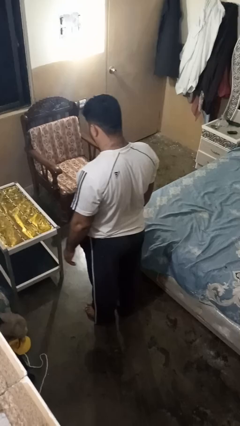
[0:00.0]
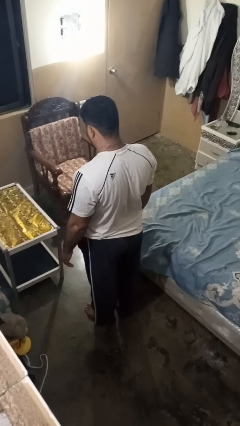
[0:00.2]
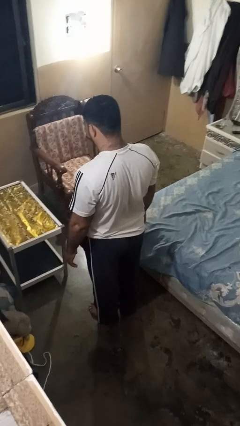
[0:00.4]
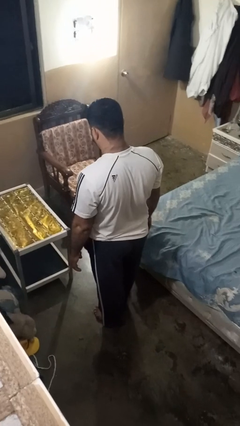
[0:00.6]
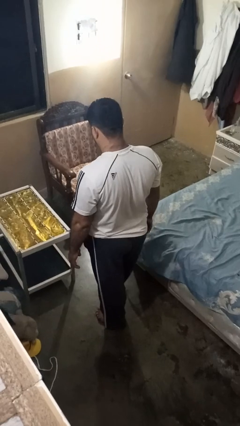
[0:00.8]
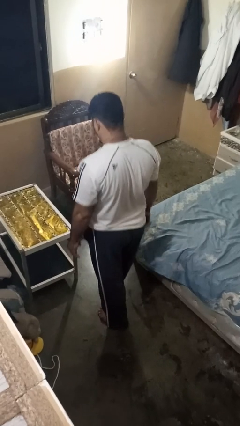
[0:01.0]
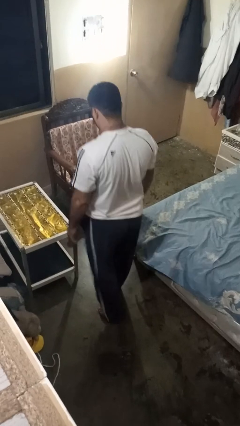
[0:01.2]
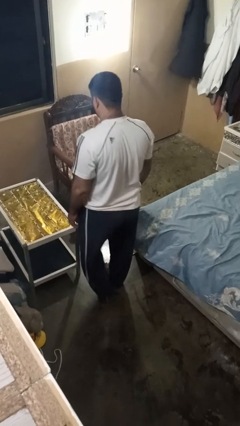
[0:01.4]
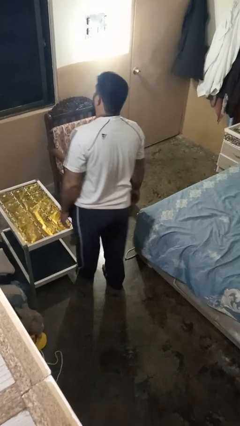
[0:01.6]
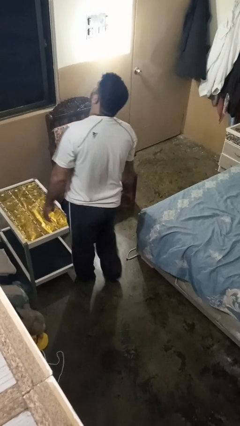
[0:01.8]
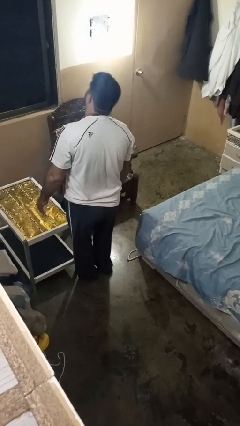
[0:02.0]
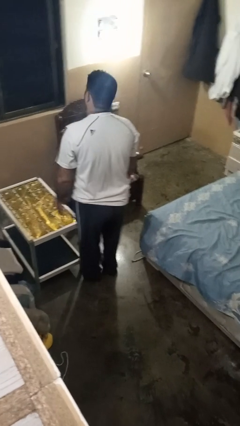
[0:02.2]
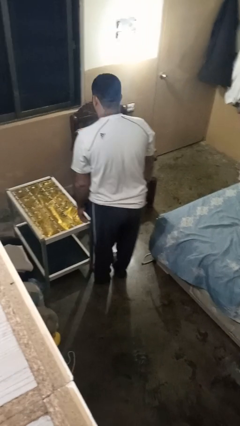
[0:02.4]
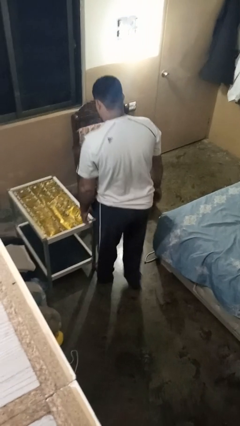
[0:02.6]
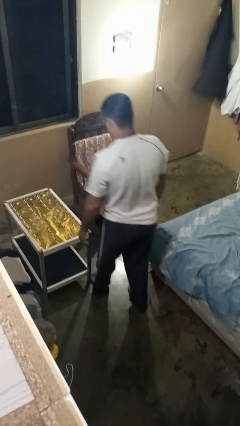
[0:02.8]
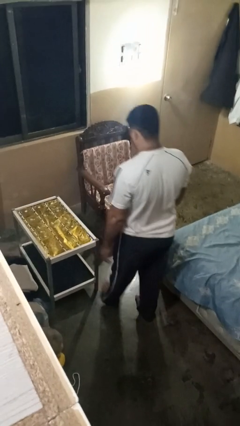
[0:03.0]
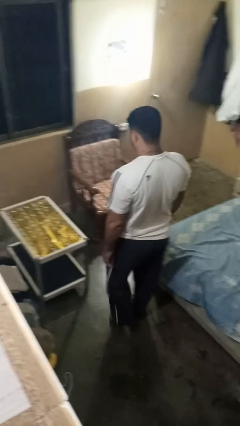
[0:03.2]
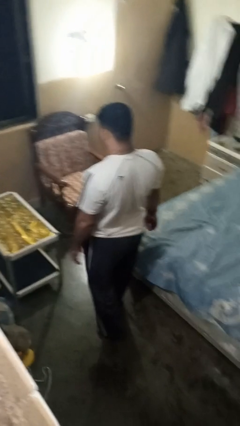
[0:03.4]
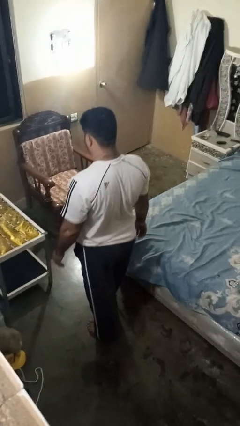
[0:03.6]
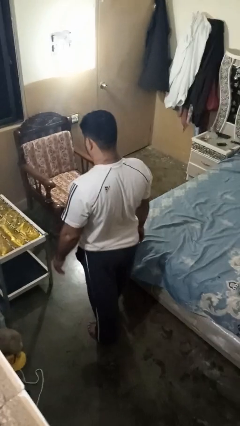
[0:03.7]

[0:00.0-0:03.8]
person bumps into table

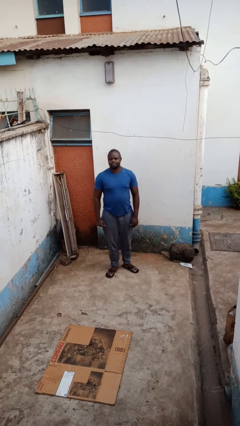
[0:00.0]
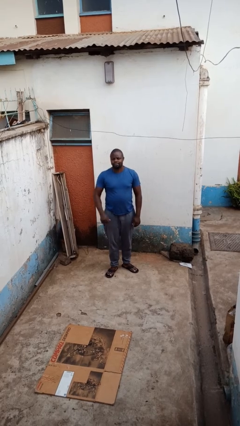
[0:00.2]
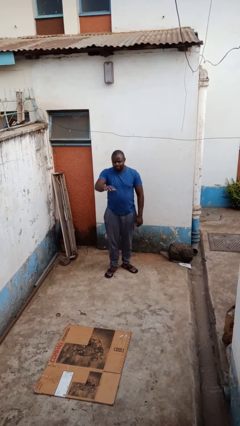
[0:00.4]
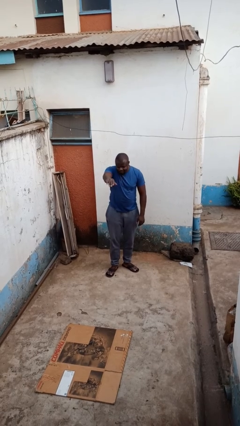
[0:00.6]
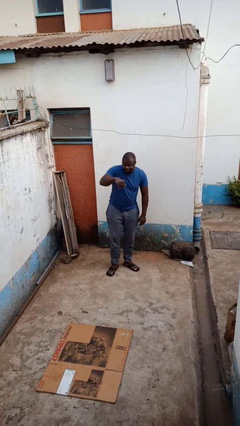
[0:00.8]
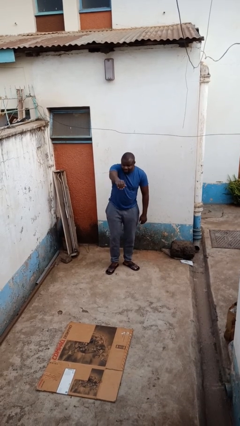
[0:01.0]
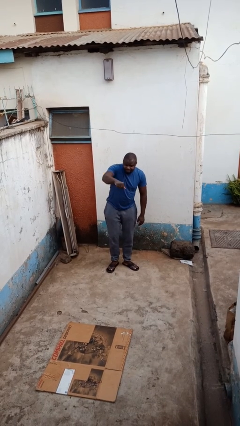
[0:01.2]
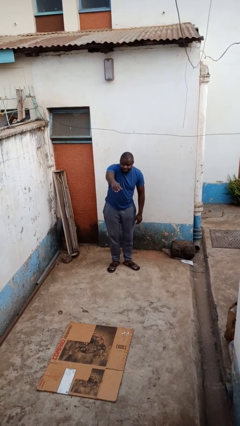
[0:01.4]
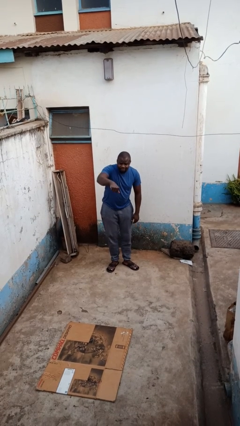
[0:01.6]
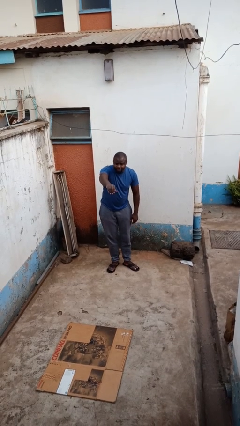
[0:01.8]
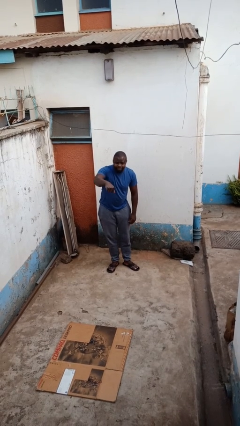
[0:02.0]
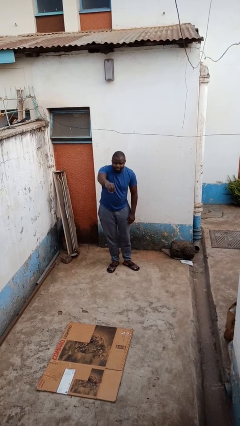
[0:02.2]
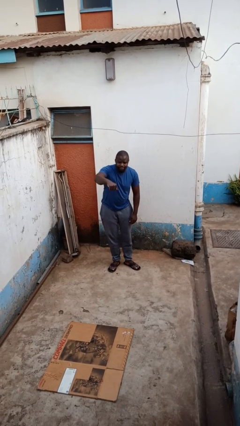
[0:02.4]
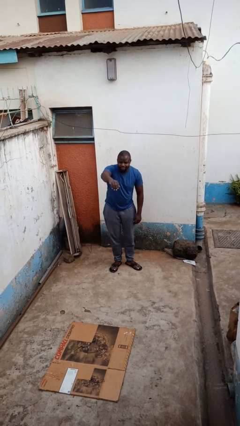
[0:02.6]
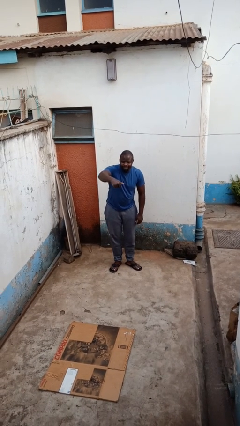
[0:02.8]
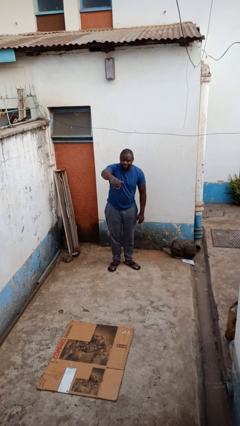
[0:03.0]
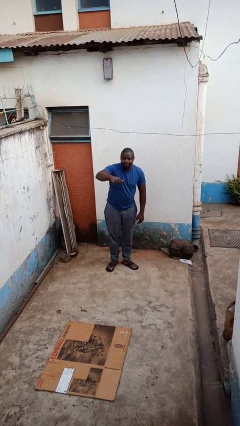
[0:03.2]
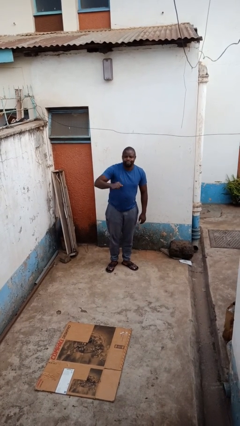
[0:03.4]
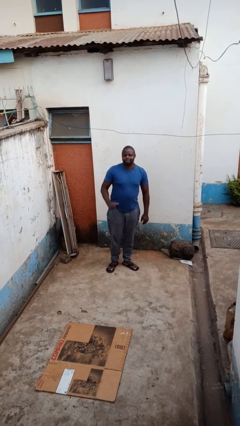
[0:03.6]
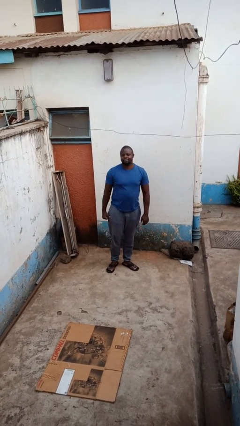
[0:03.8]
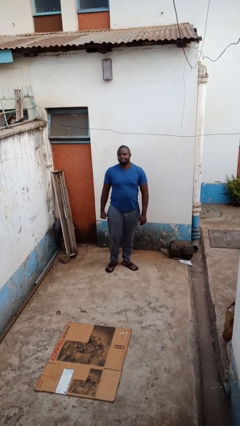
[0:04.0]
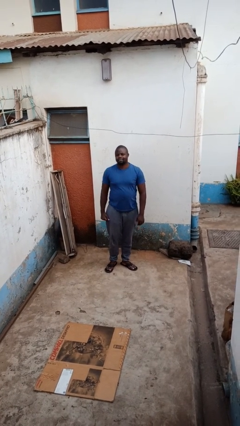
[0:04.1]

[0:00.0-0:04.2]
person gestures come here

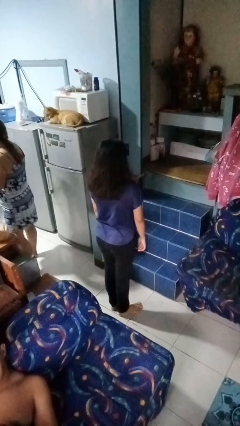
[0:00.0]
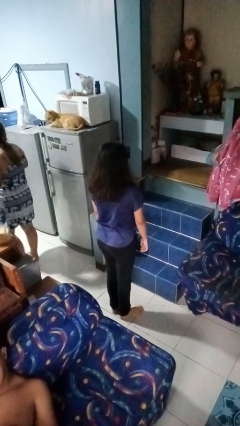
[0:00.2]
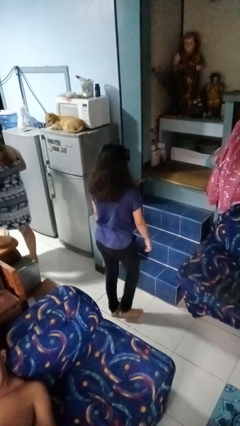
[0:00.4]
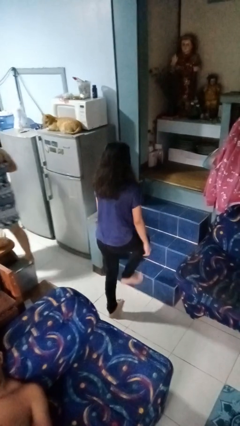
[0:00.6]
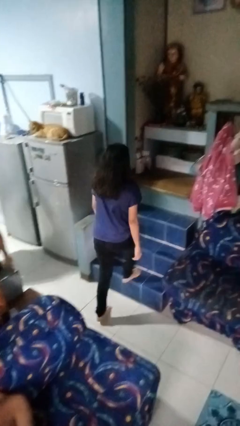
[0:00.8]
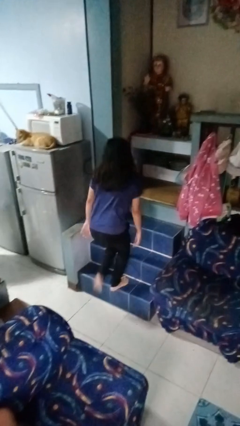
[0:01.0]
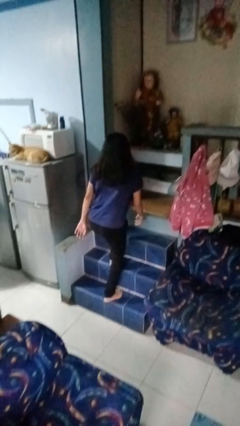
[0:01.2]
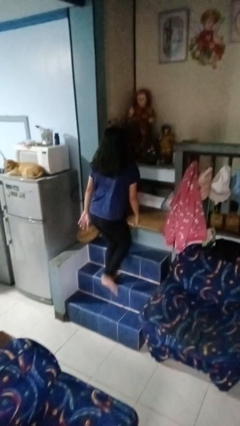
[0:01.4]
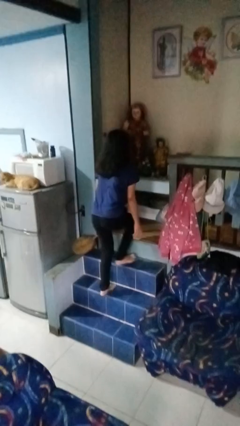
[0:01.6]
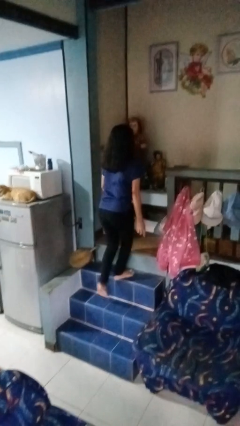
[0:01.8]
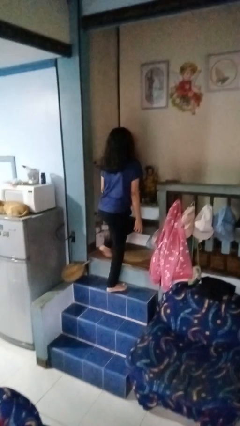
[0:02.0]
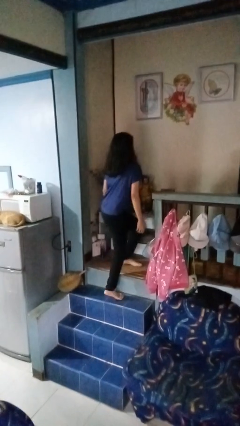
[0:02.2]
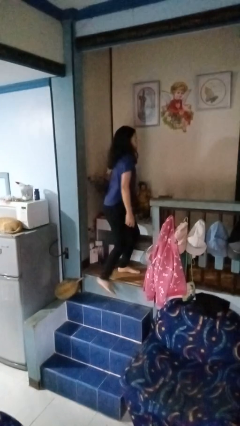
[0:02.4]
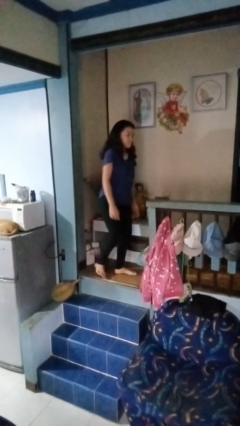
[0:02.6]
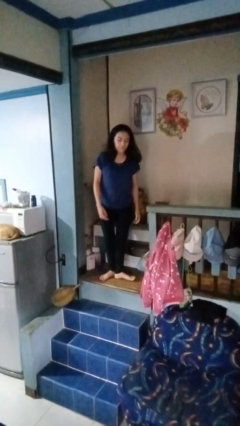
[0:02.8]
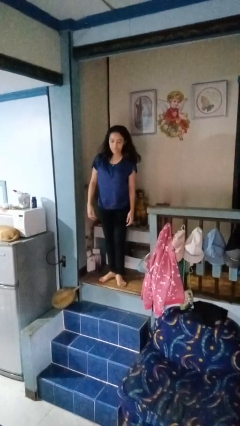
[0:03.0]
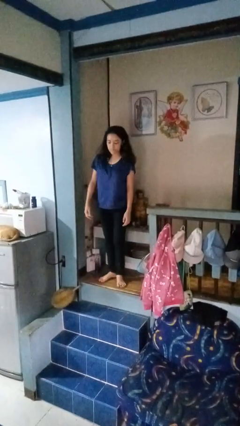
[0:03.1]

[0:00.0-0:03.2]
person climbs up stairs

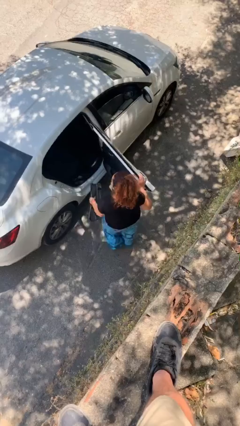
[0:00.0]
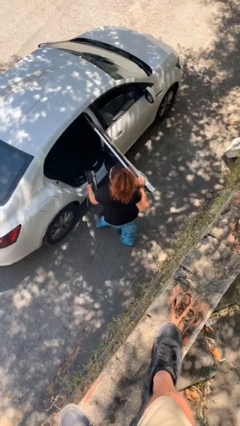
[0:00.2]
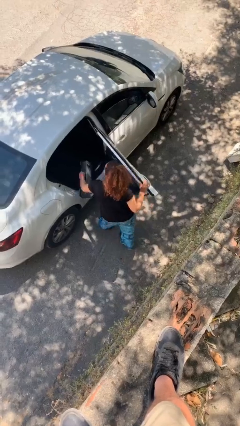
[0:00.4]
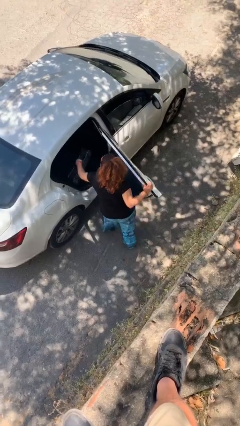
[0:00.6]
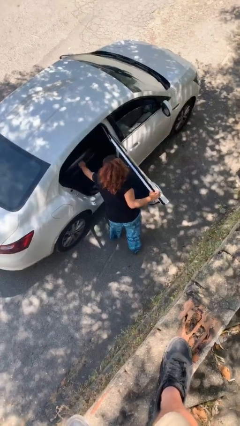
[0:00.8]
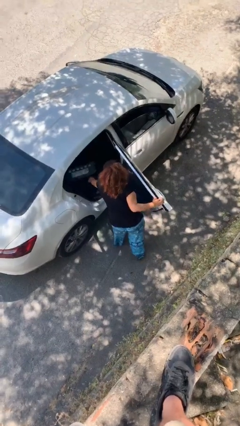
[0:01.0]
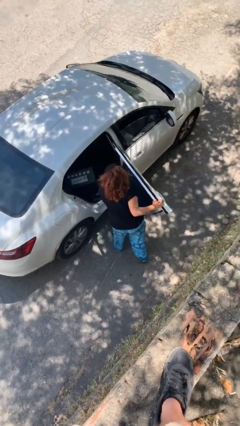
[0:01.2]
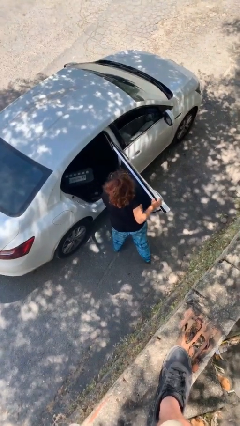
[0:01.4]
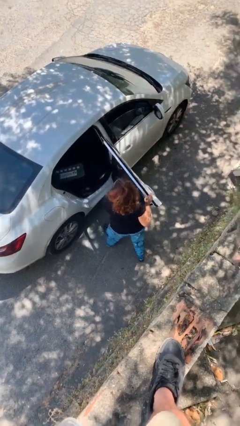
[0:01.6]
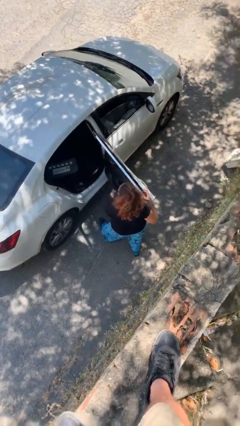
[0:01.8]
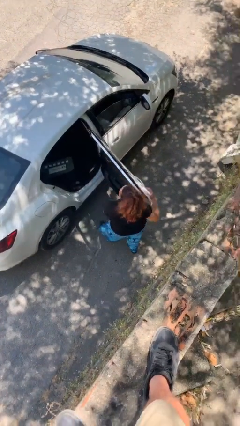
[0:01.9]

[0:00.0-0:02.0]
person loads car

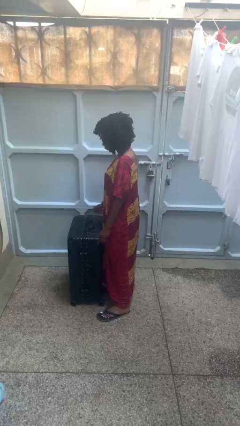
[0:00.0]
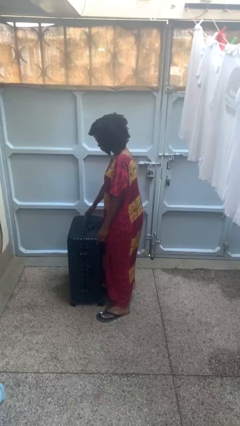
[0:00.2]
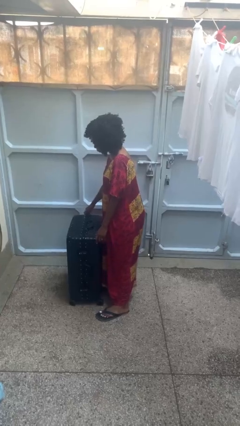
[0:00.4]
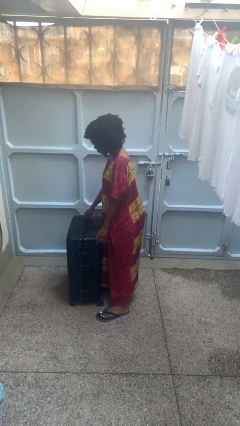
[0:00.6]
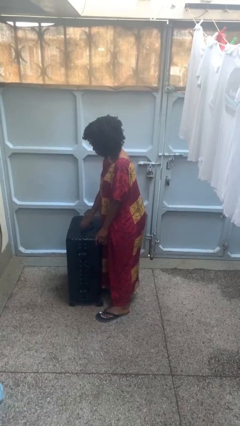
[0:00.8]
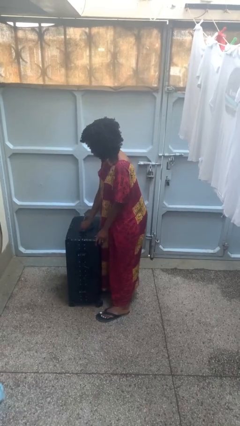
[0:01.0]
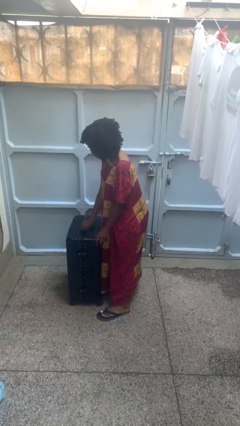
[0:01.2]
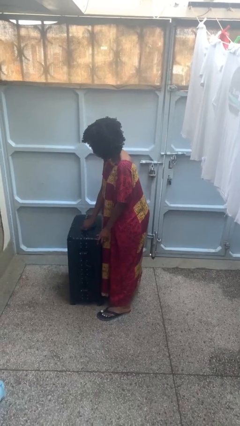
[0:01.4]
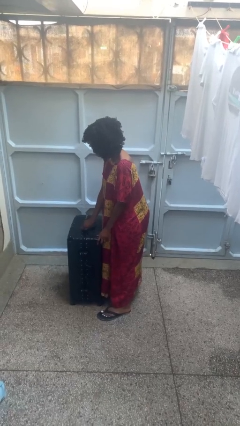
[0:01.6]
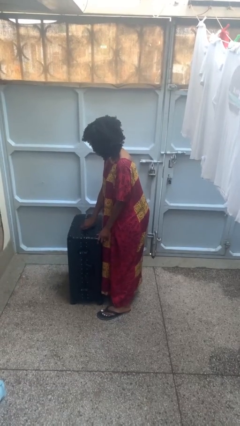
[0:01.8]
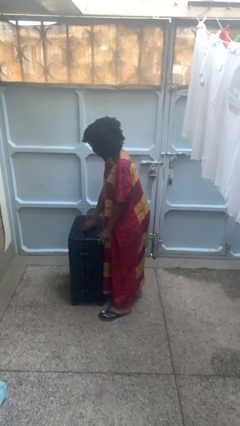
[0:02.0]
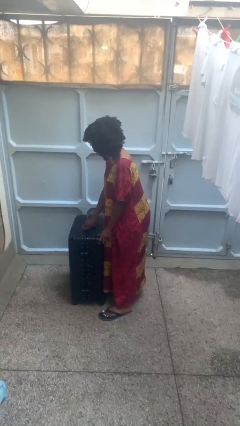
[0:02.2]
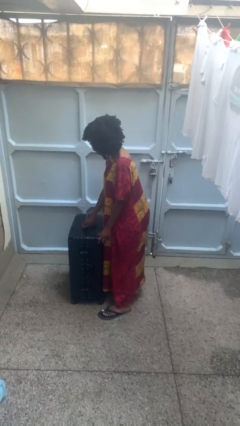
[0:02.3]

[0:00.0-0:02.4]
person opens suitcase

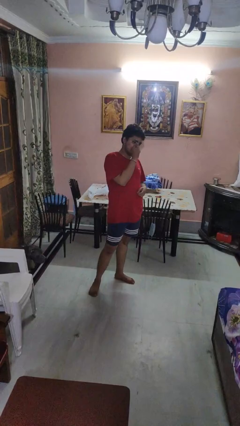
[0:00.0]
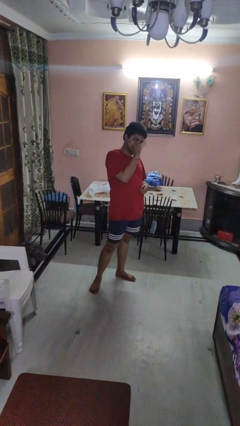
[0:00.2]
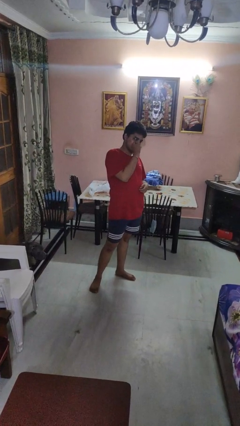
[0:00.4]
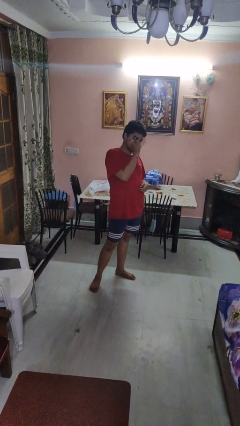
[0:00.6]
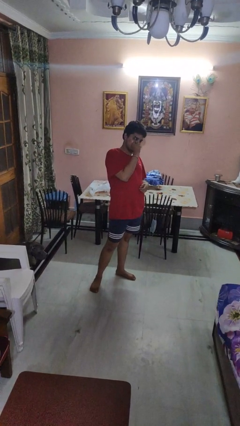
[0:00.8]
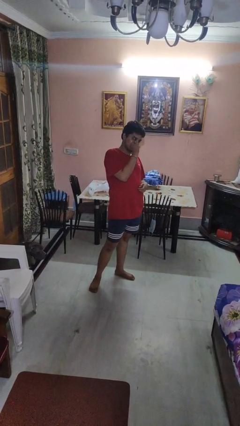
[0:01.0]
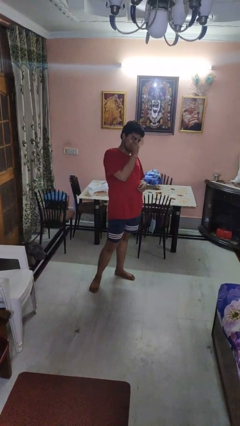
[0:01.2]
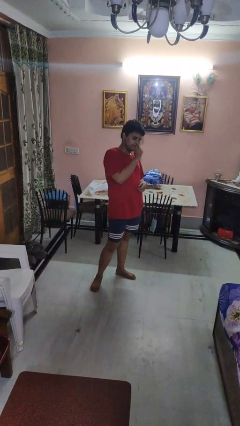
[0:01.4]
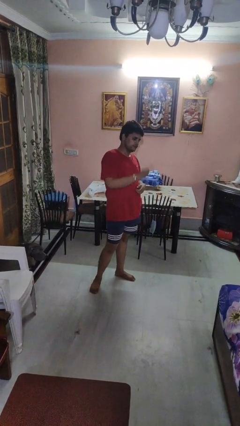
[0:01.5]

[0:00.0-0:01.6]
person vapes

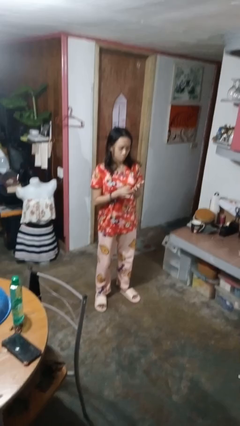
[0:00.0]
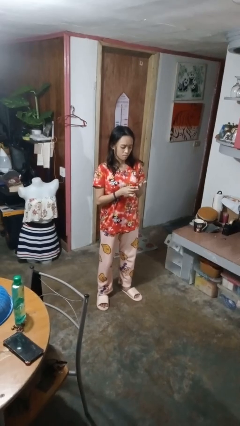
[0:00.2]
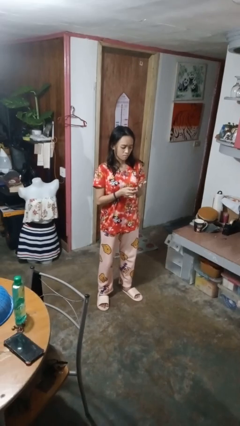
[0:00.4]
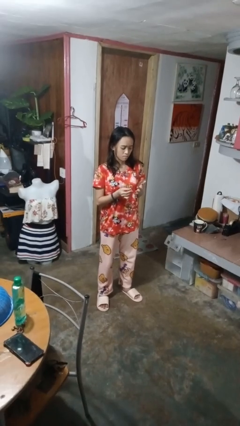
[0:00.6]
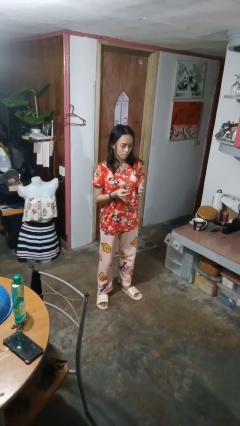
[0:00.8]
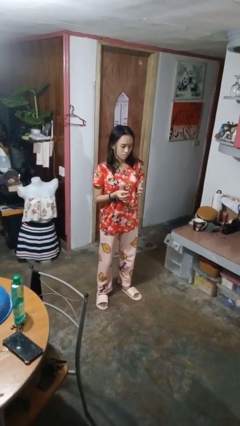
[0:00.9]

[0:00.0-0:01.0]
person takes off ring
